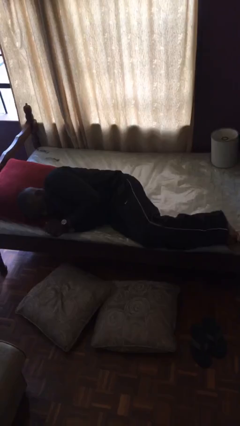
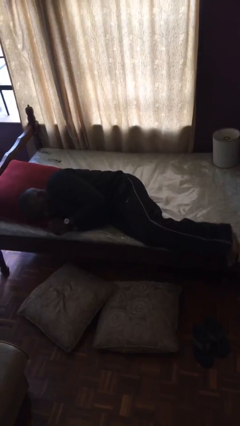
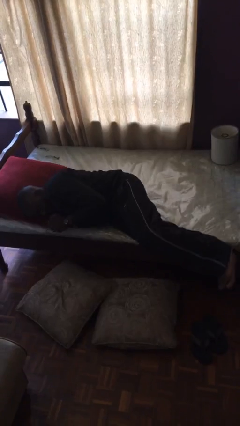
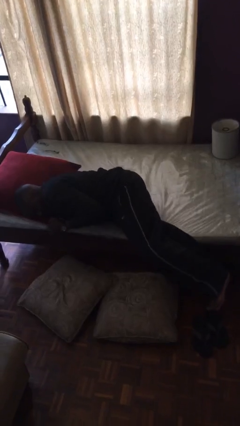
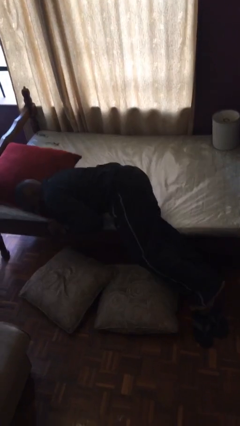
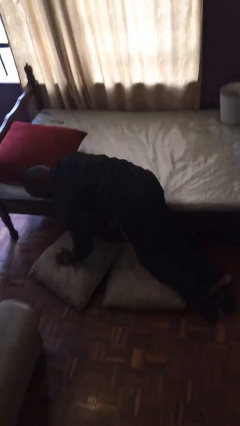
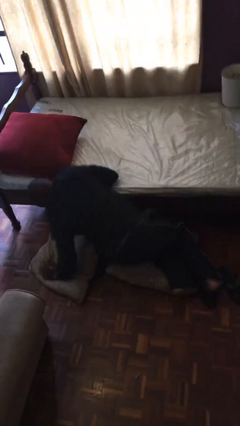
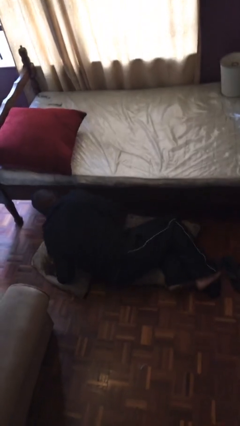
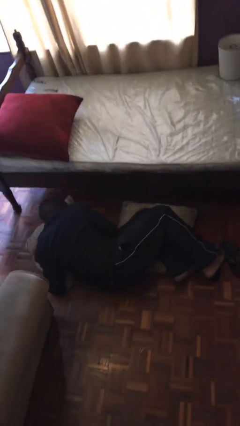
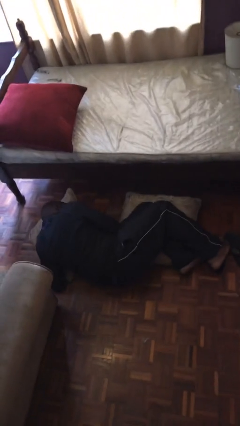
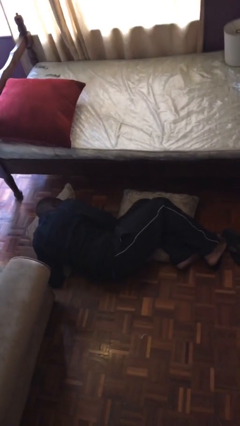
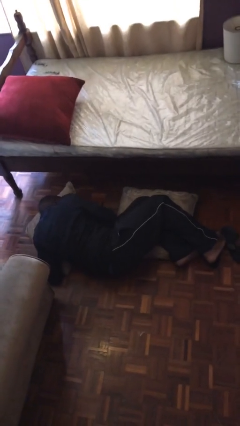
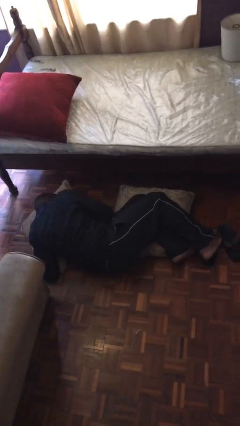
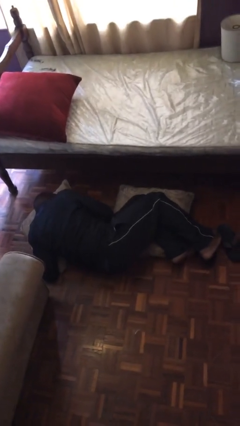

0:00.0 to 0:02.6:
person falls from bed

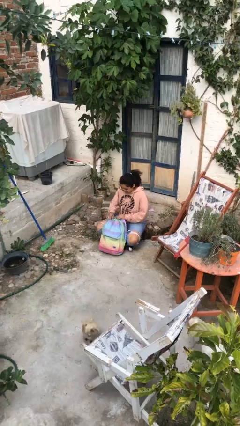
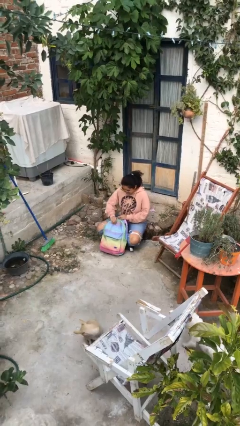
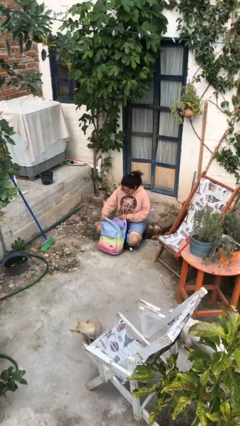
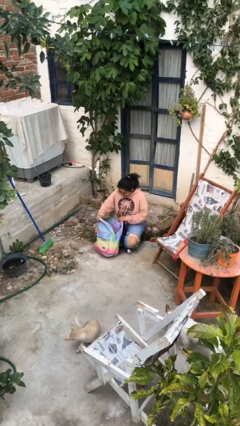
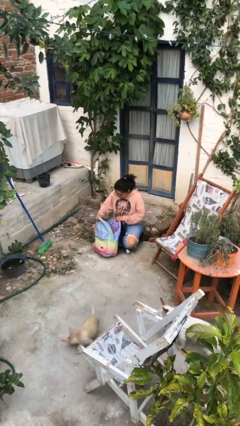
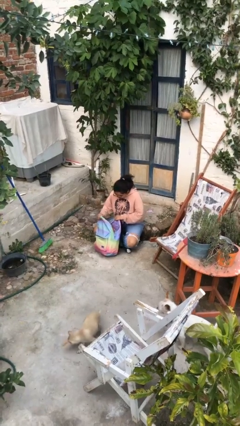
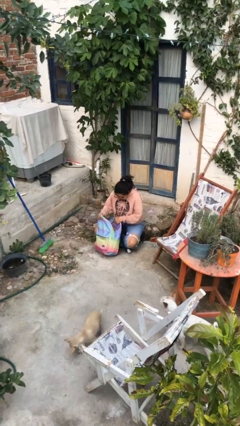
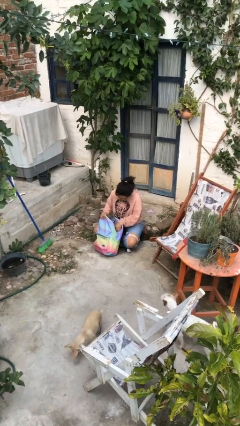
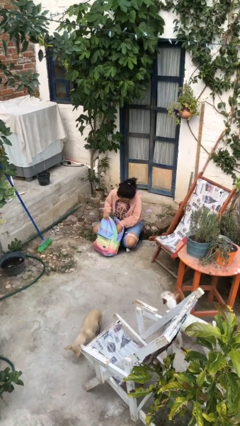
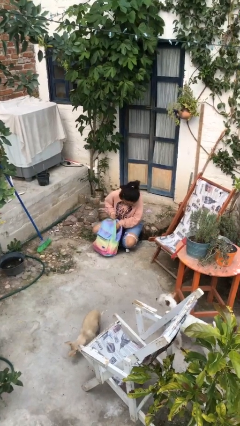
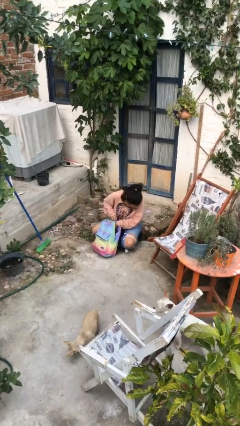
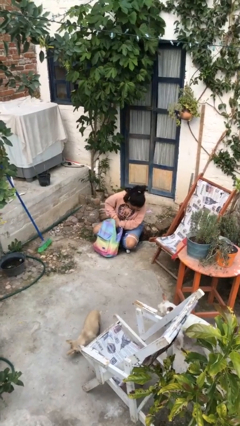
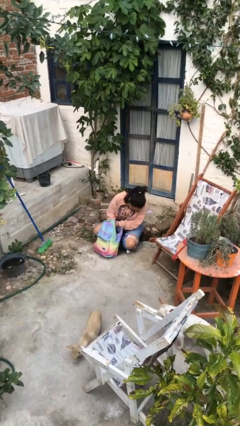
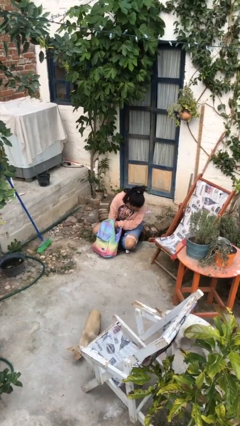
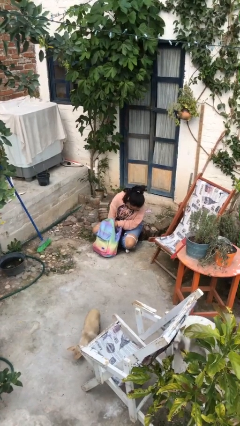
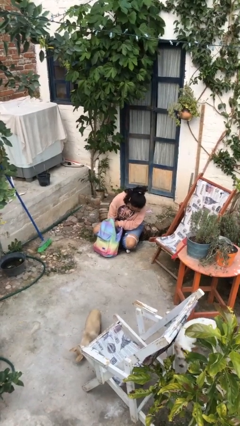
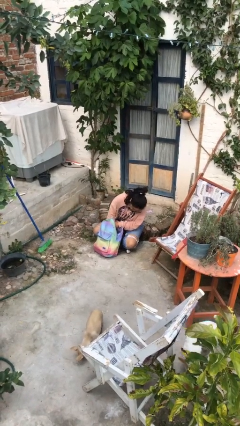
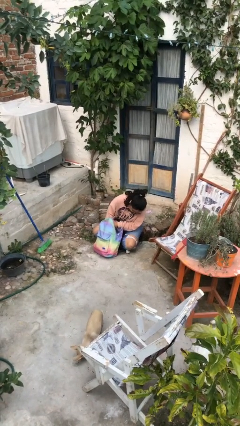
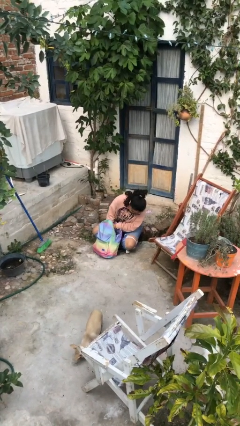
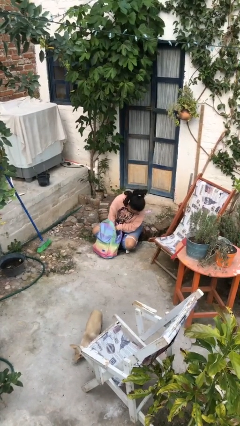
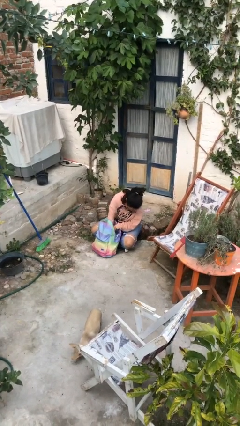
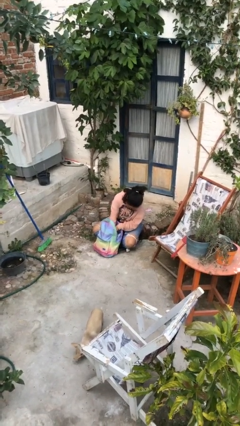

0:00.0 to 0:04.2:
person searches in backpack

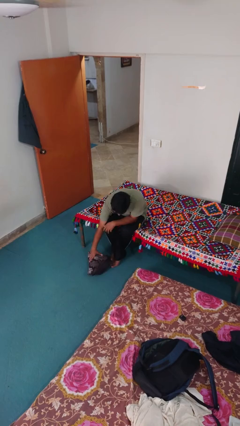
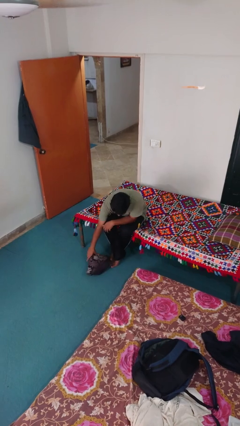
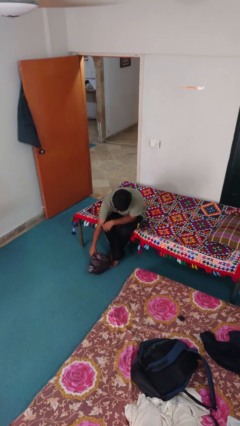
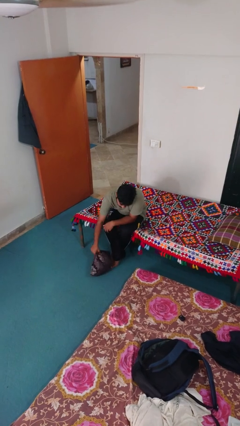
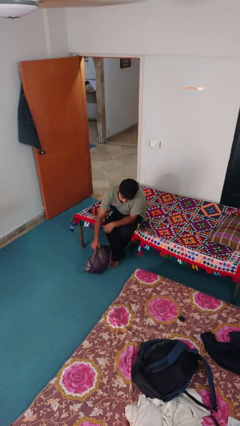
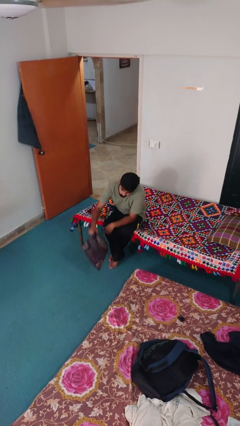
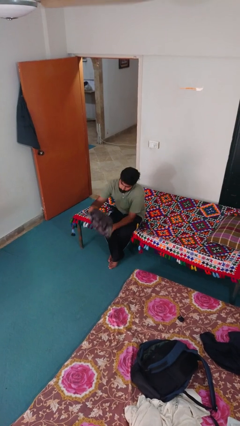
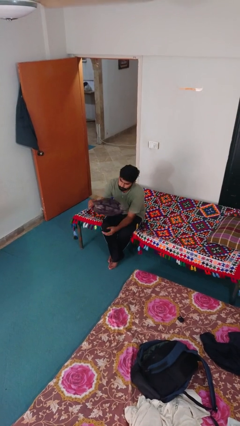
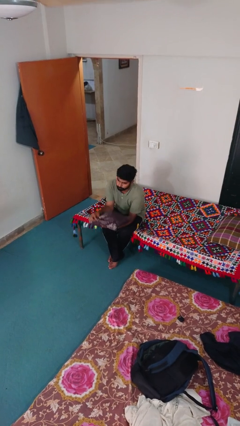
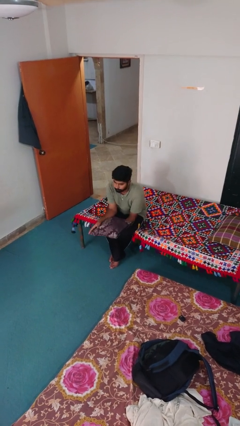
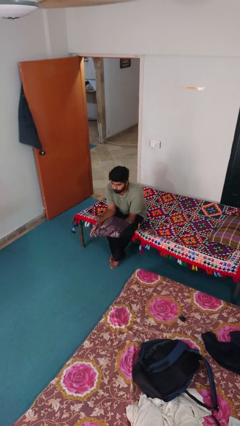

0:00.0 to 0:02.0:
person picks up object from floor

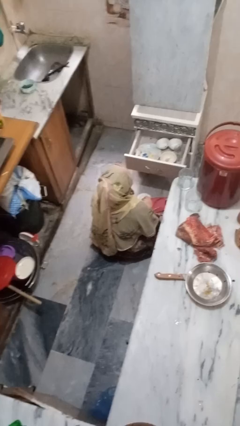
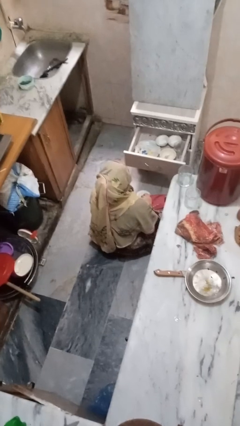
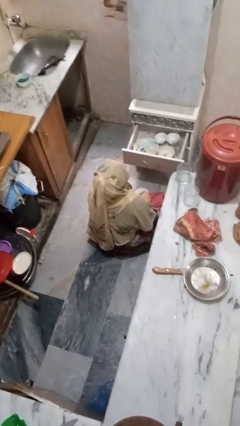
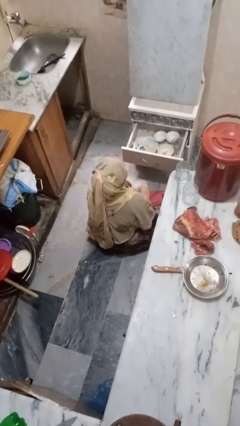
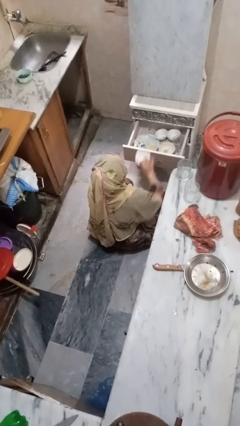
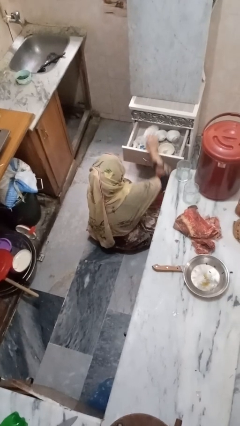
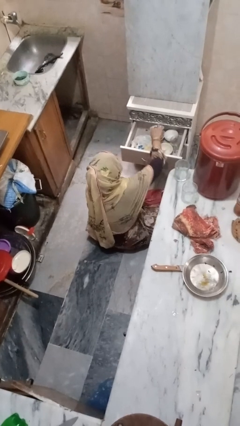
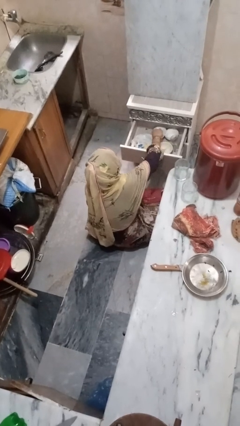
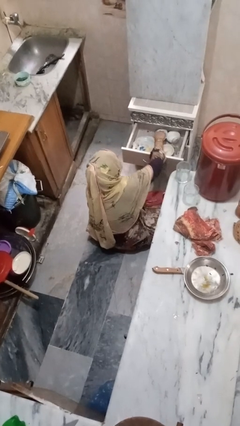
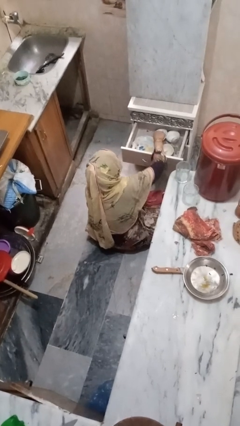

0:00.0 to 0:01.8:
person puts object into kitchen drawer

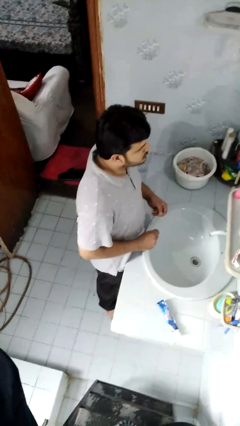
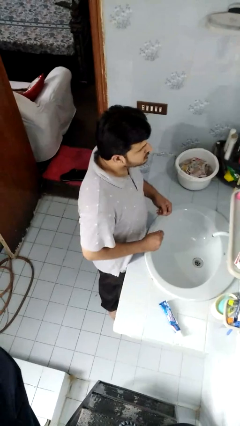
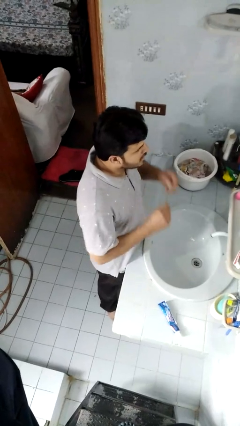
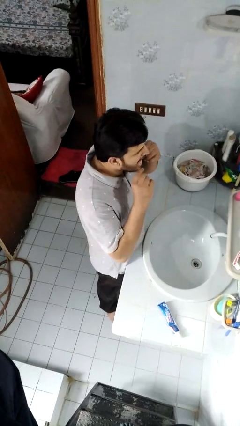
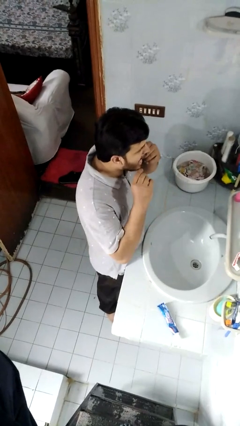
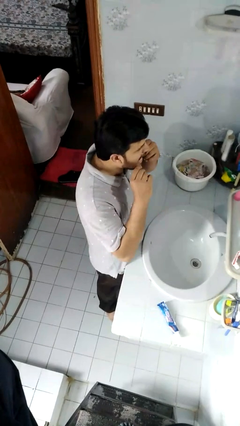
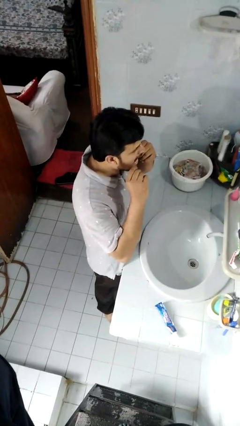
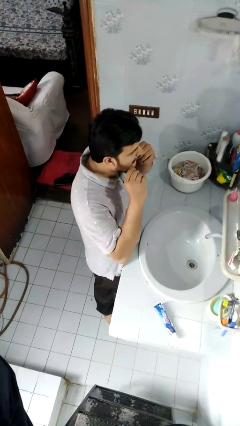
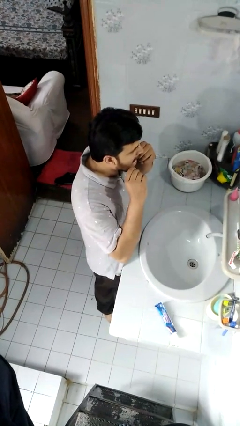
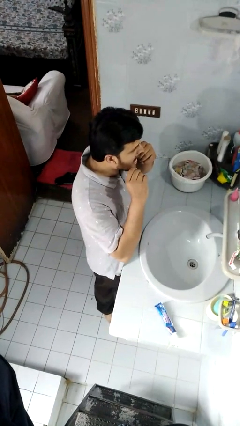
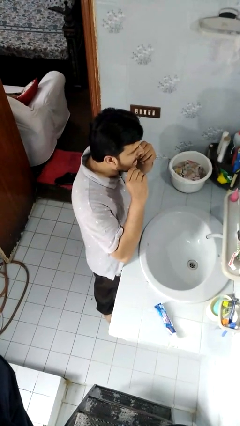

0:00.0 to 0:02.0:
person flosses

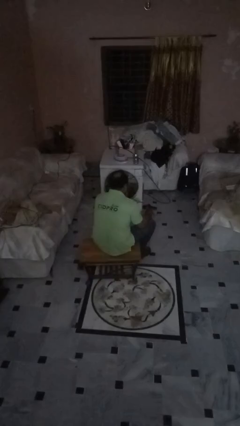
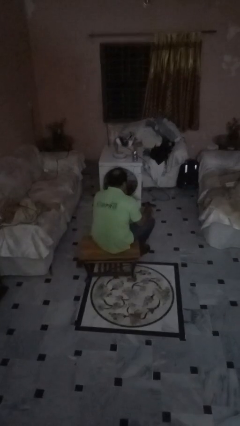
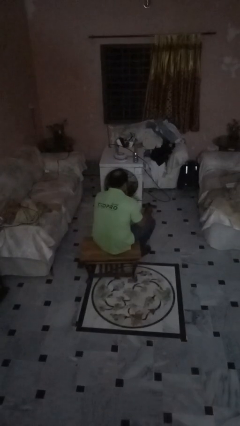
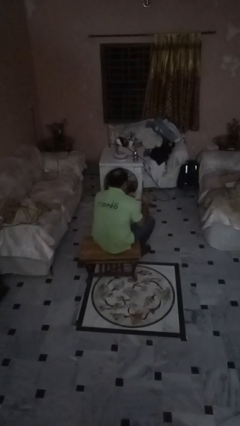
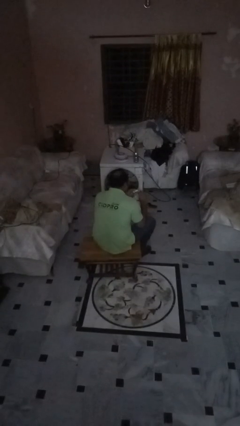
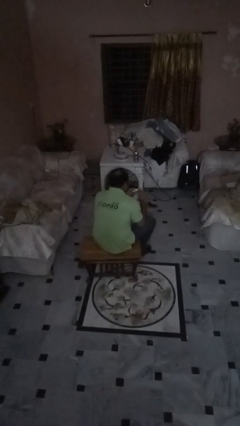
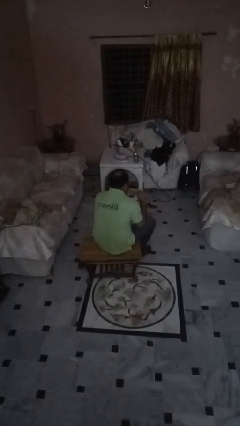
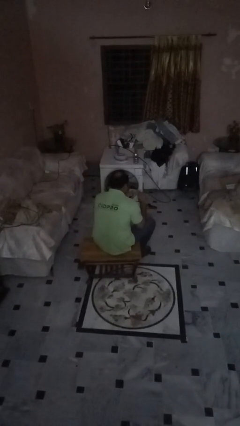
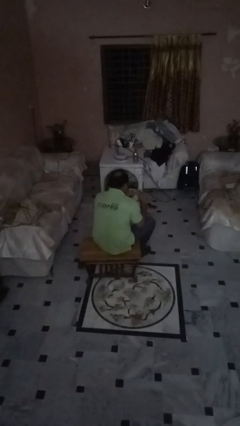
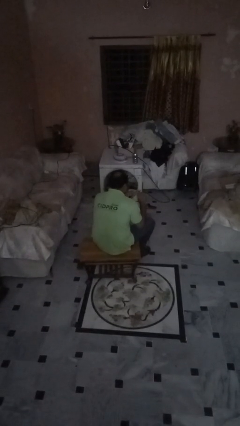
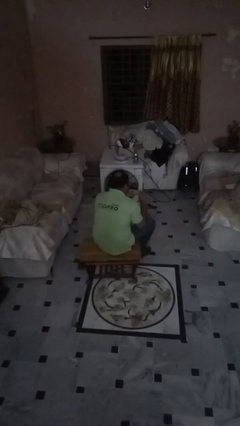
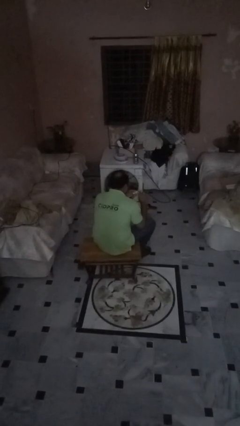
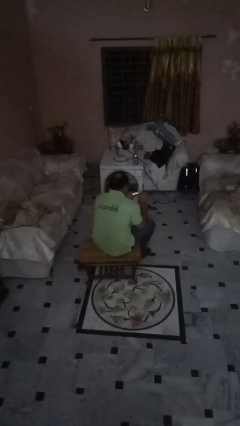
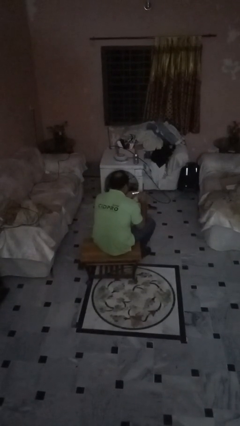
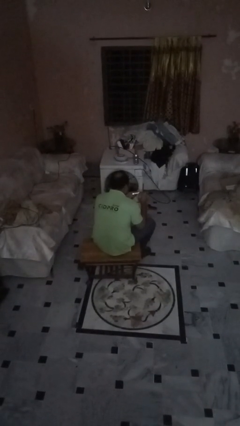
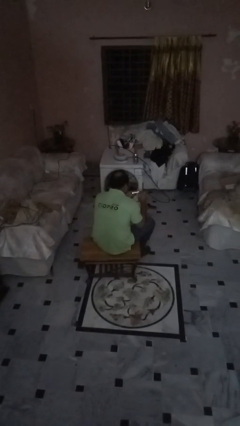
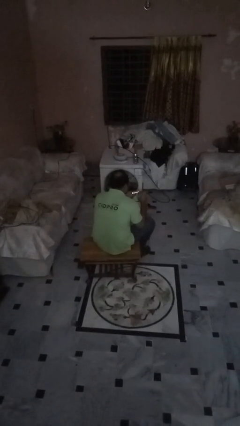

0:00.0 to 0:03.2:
person files fingernails

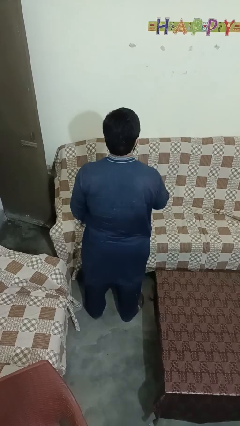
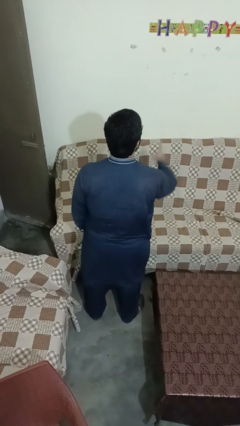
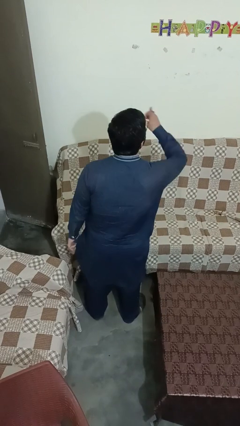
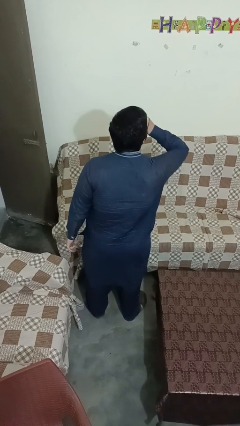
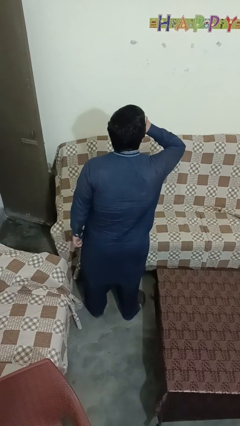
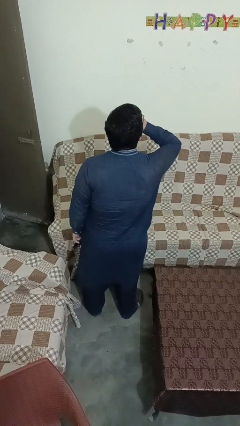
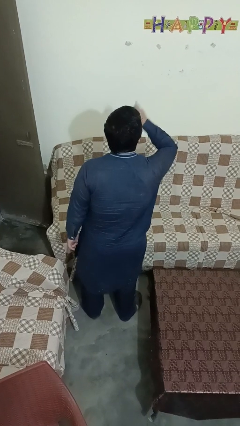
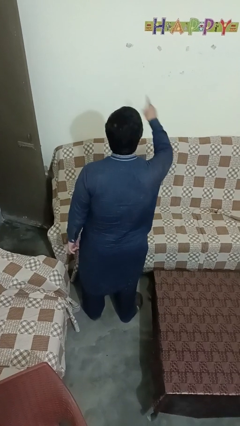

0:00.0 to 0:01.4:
person gestures be quiet
